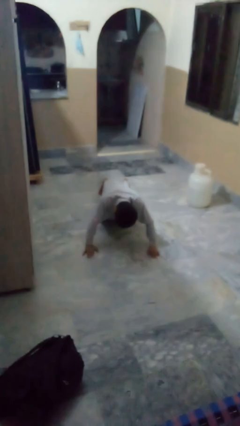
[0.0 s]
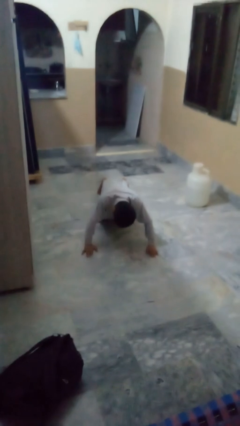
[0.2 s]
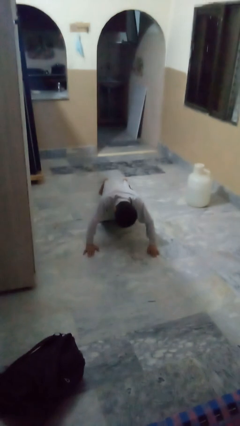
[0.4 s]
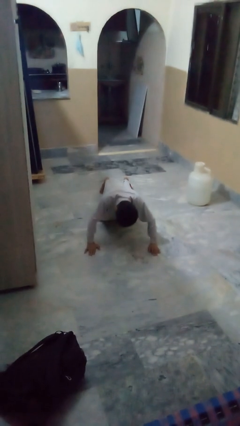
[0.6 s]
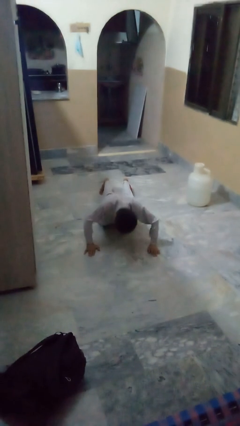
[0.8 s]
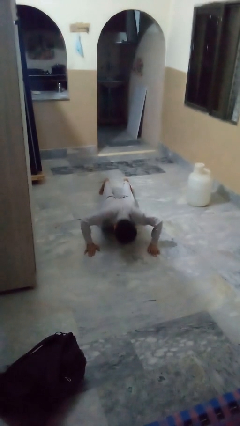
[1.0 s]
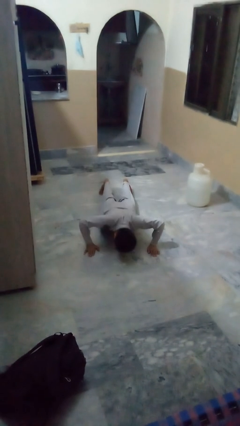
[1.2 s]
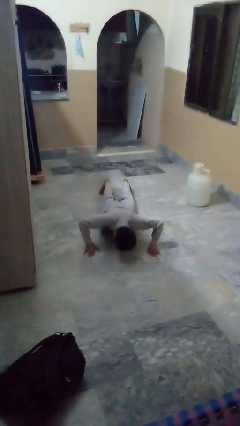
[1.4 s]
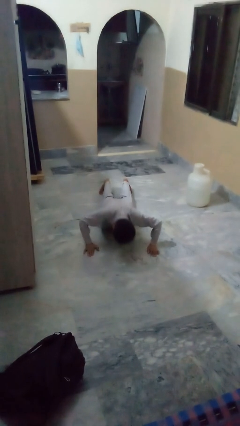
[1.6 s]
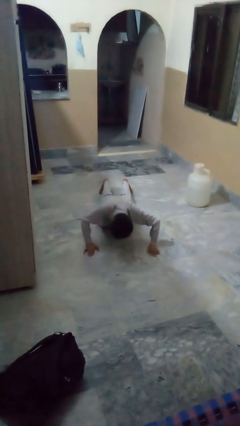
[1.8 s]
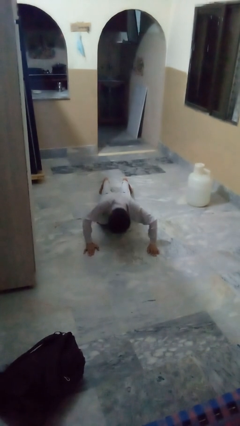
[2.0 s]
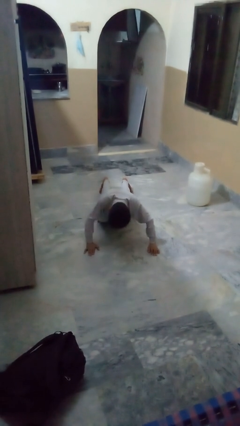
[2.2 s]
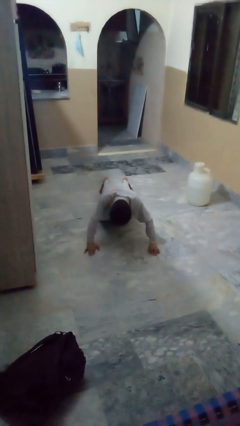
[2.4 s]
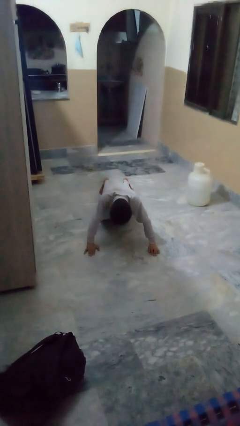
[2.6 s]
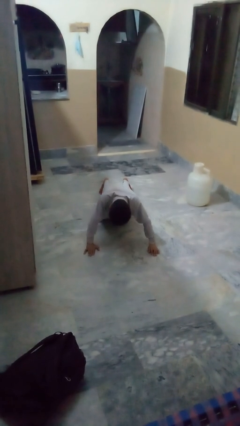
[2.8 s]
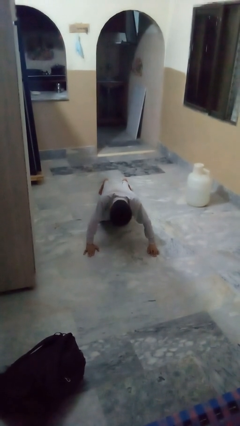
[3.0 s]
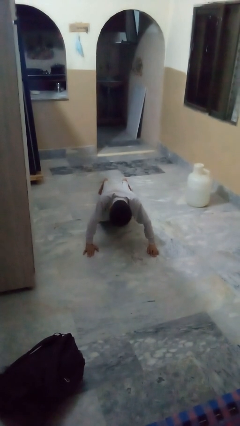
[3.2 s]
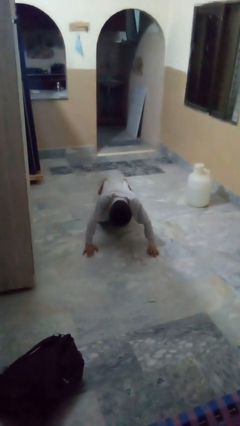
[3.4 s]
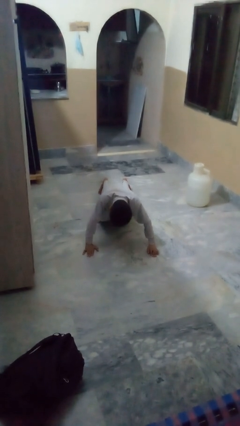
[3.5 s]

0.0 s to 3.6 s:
person exercises with pushup

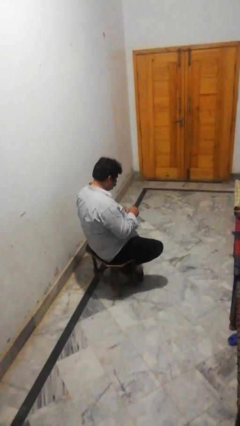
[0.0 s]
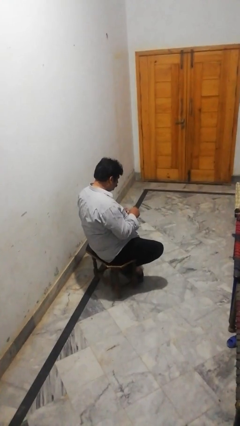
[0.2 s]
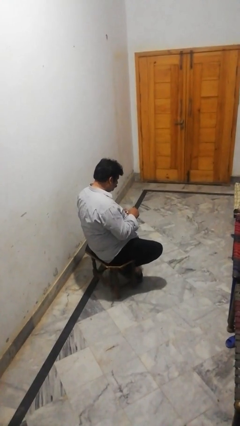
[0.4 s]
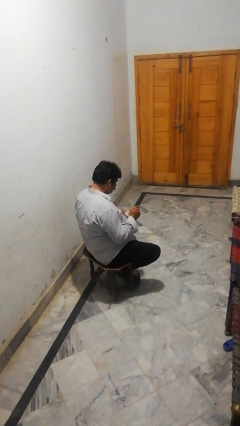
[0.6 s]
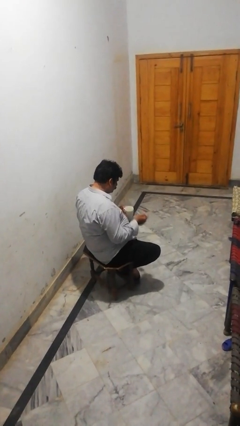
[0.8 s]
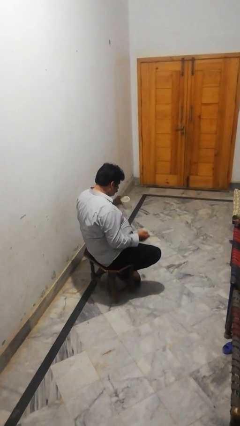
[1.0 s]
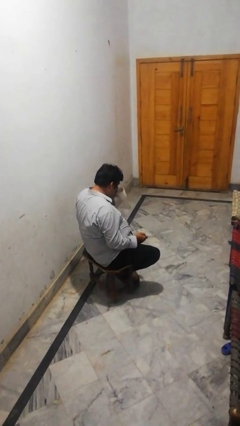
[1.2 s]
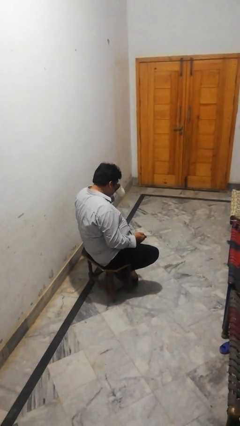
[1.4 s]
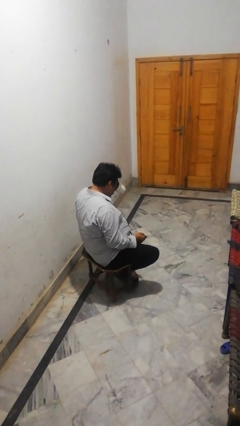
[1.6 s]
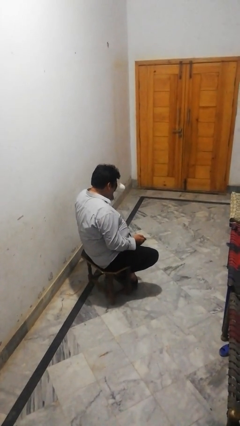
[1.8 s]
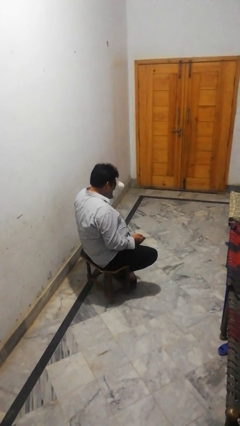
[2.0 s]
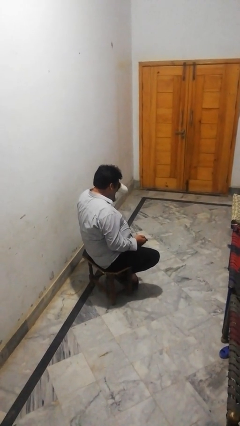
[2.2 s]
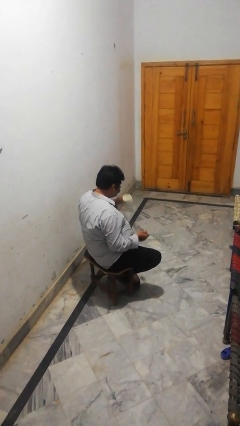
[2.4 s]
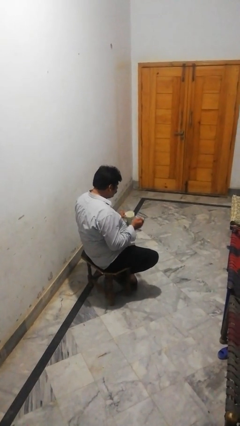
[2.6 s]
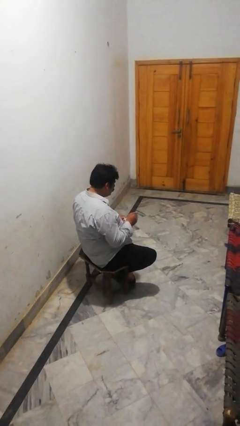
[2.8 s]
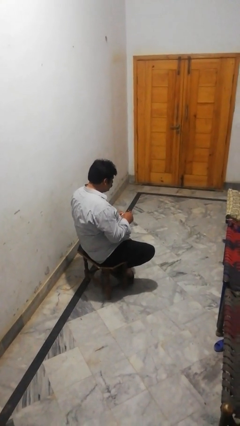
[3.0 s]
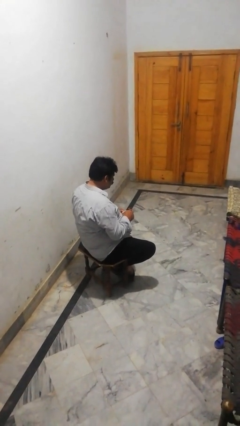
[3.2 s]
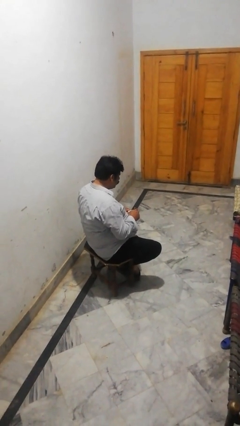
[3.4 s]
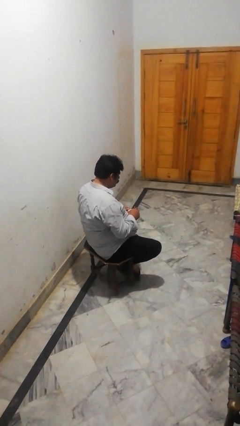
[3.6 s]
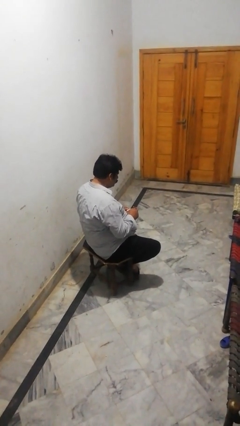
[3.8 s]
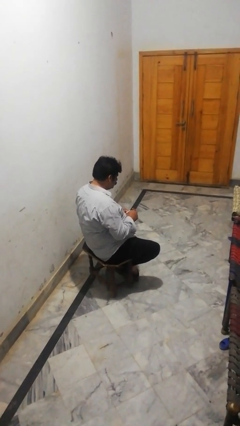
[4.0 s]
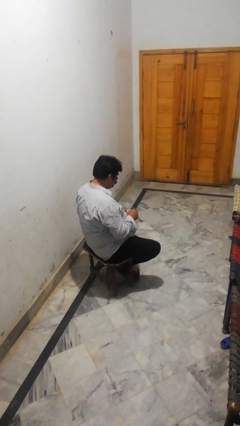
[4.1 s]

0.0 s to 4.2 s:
person drinks from mug

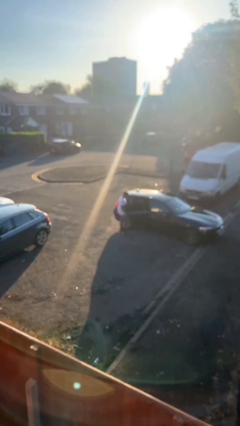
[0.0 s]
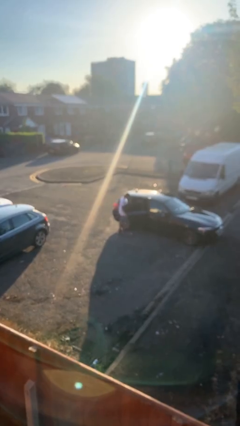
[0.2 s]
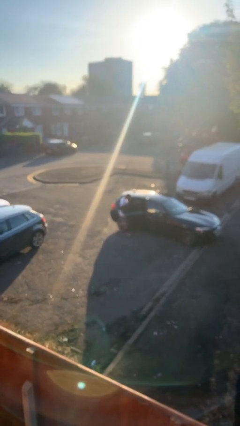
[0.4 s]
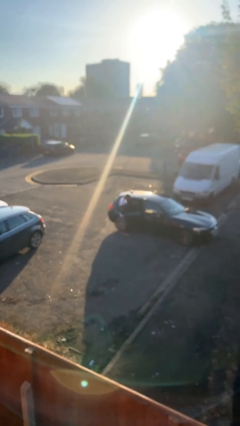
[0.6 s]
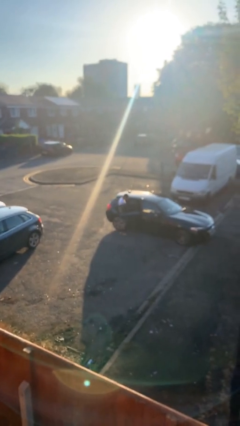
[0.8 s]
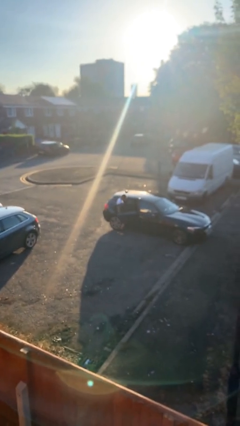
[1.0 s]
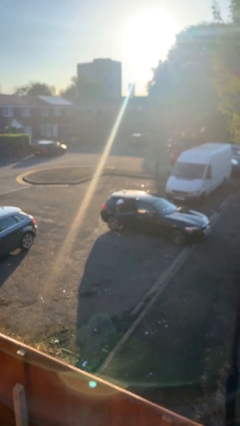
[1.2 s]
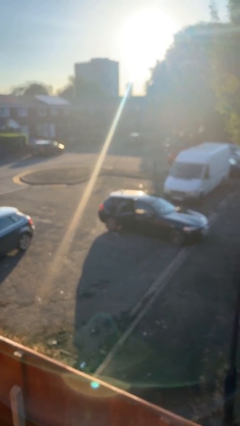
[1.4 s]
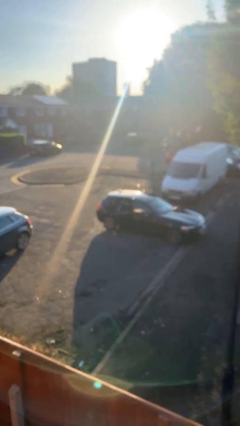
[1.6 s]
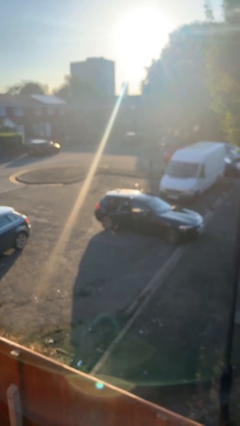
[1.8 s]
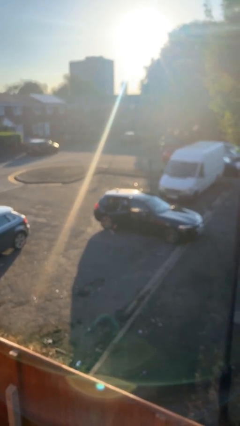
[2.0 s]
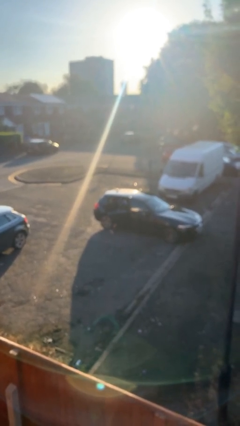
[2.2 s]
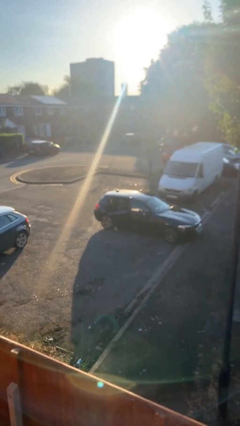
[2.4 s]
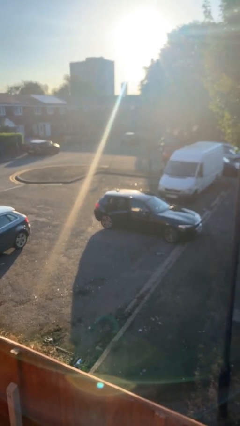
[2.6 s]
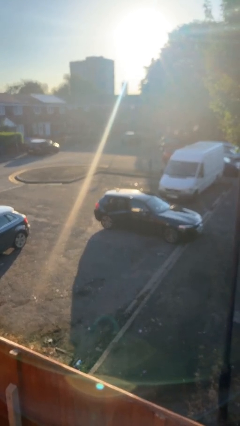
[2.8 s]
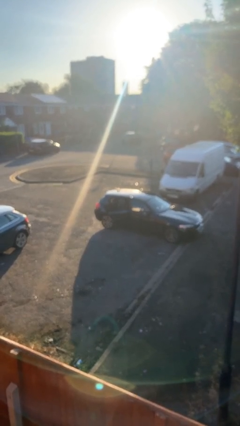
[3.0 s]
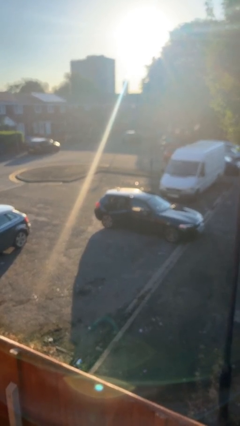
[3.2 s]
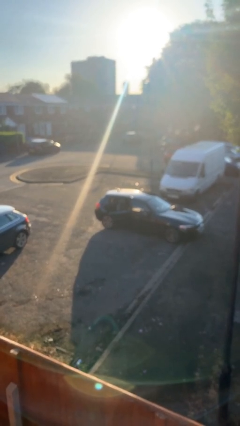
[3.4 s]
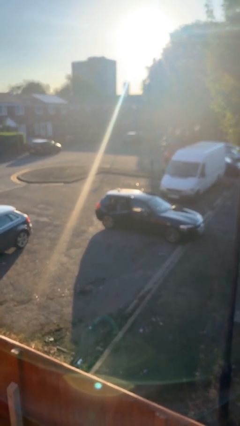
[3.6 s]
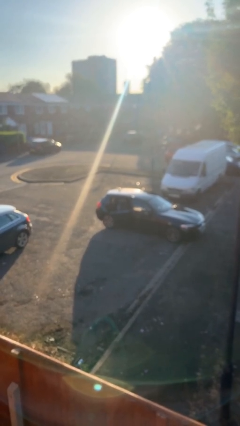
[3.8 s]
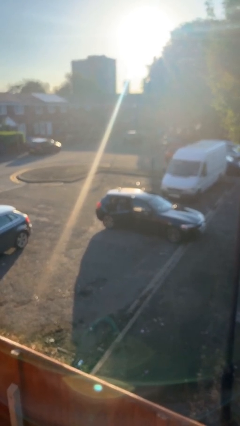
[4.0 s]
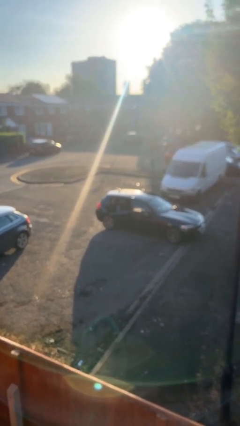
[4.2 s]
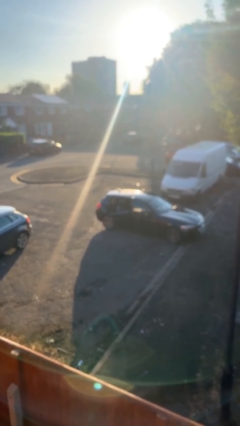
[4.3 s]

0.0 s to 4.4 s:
person enters car

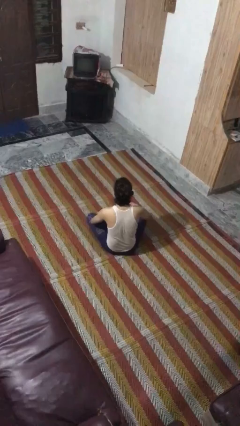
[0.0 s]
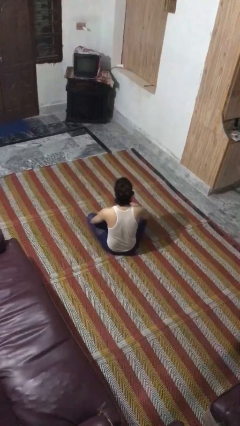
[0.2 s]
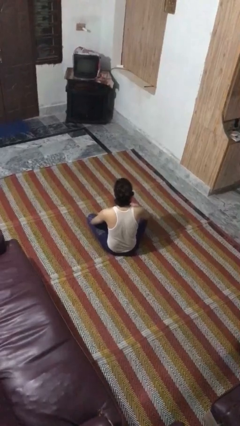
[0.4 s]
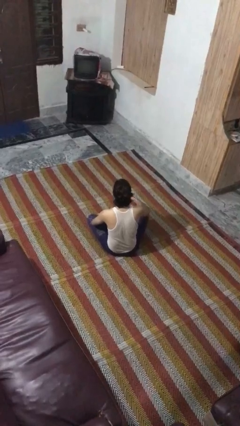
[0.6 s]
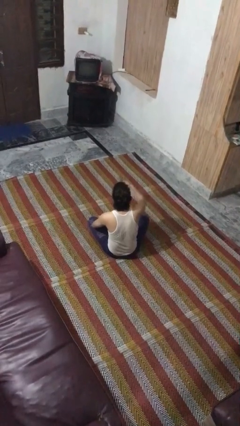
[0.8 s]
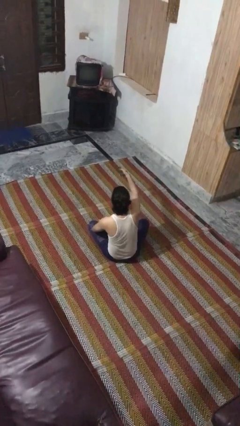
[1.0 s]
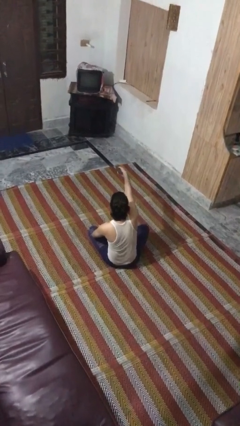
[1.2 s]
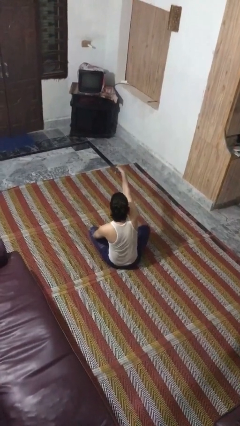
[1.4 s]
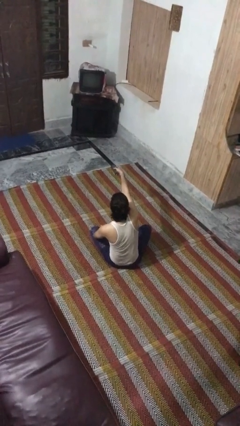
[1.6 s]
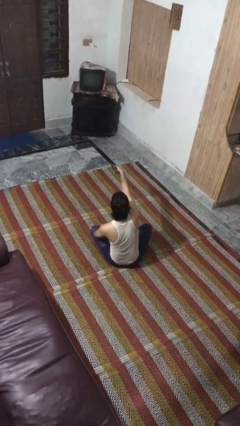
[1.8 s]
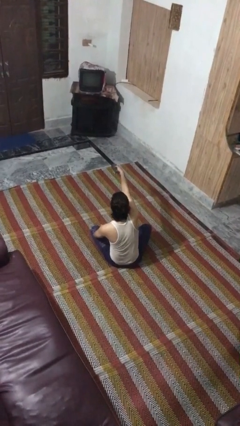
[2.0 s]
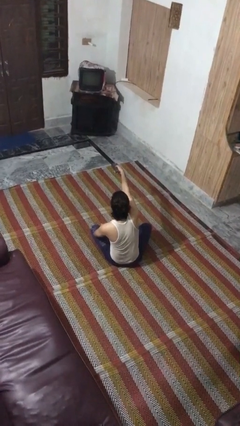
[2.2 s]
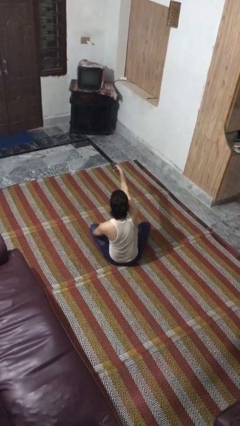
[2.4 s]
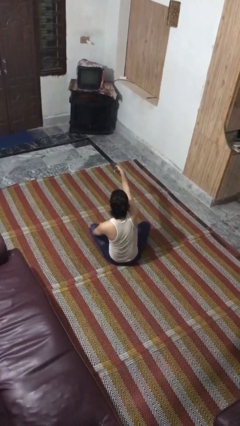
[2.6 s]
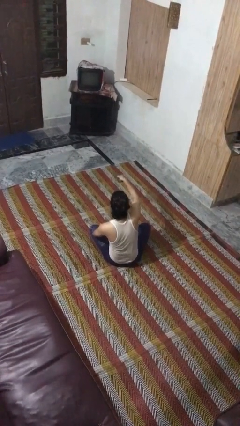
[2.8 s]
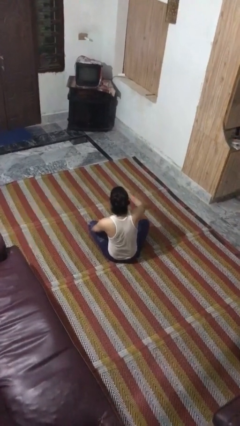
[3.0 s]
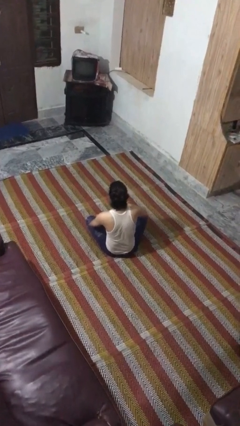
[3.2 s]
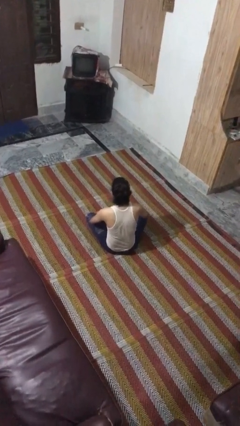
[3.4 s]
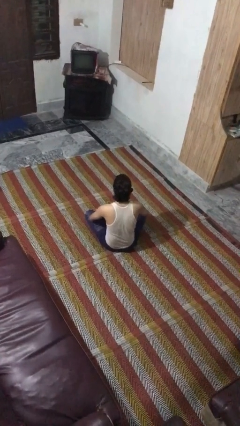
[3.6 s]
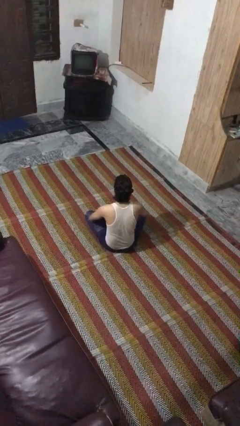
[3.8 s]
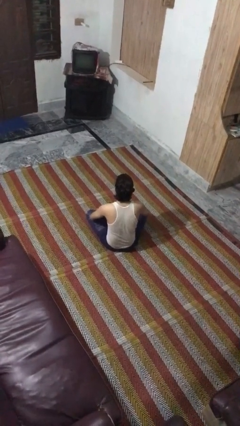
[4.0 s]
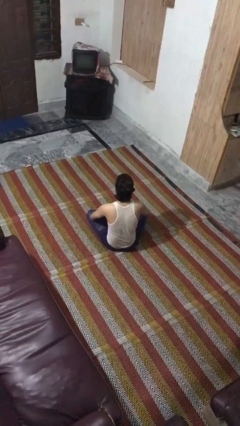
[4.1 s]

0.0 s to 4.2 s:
person uses television remote

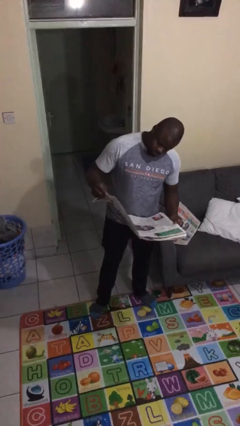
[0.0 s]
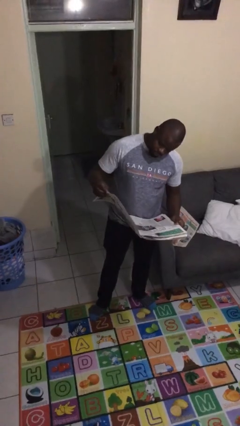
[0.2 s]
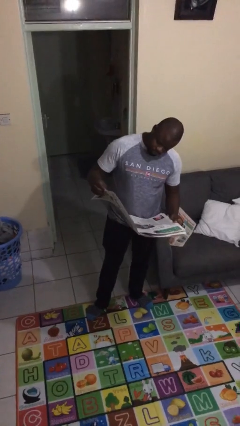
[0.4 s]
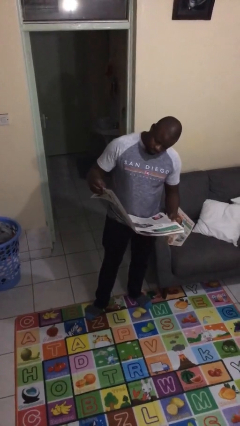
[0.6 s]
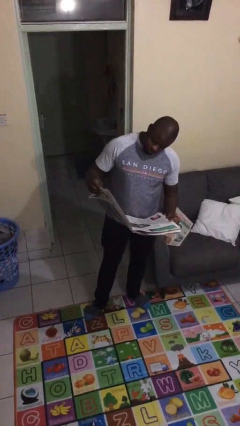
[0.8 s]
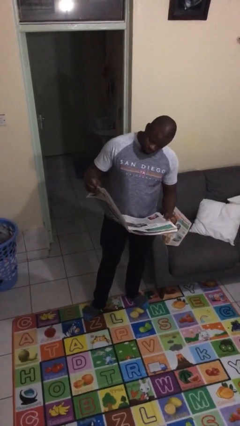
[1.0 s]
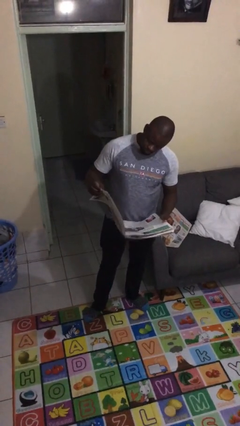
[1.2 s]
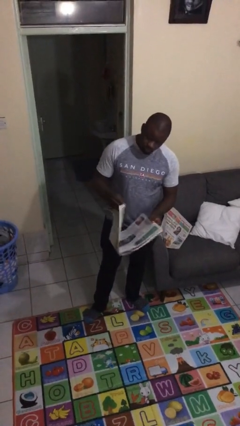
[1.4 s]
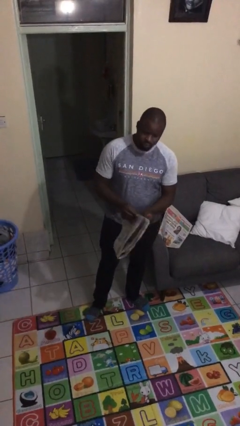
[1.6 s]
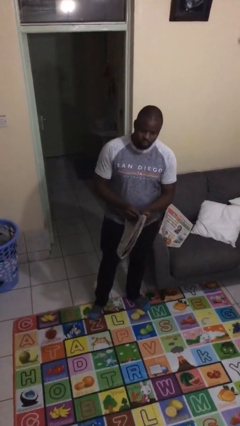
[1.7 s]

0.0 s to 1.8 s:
person reads newspaper
